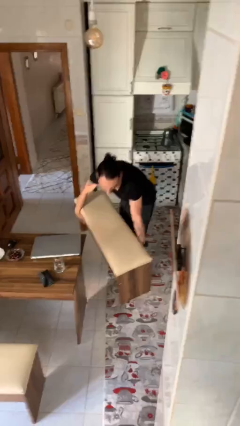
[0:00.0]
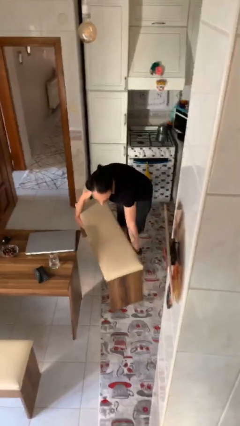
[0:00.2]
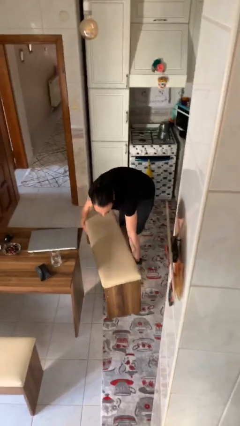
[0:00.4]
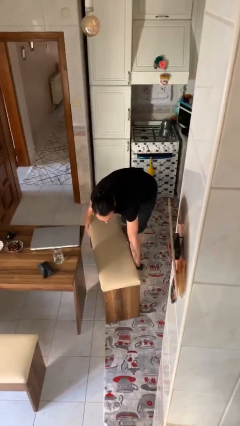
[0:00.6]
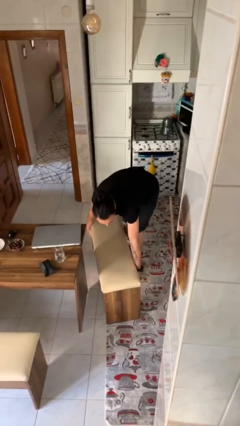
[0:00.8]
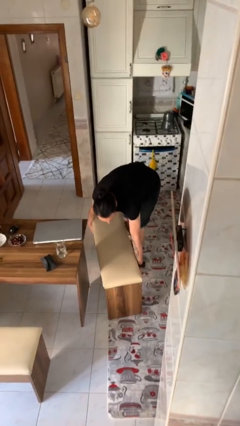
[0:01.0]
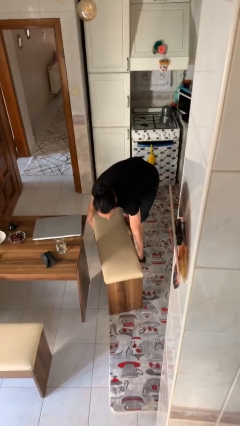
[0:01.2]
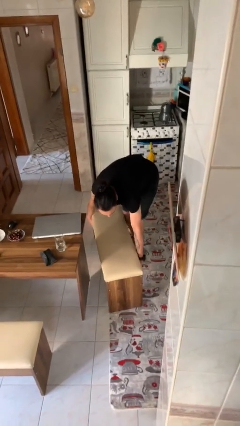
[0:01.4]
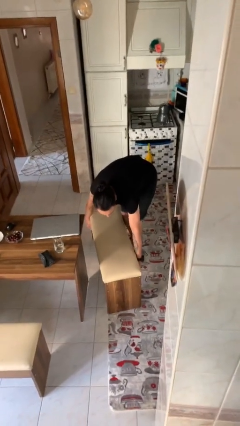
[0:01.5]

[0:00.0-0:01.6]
person puts down object on floor

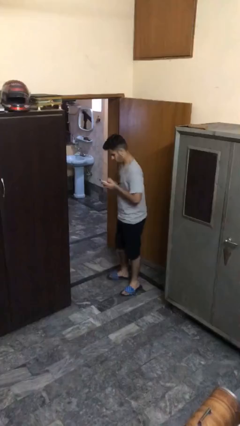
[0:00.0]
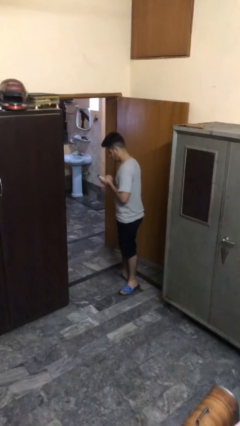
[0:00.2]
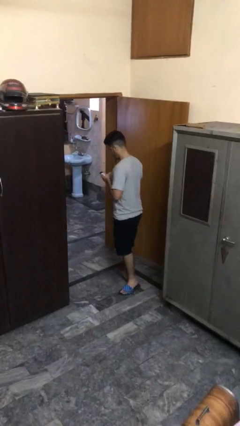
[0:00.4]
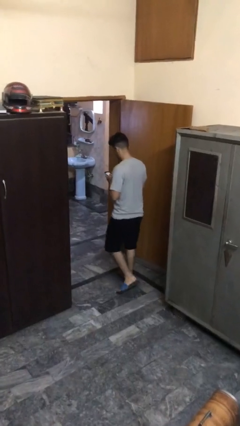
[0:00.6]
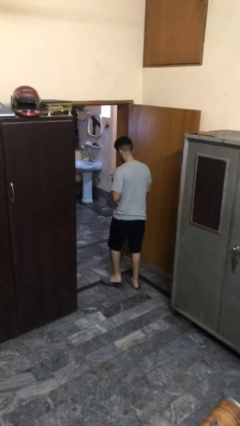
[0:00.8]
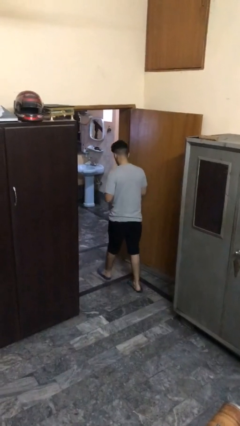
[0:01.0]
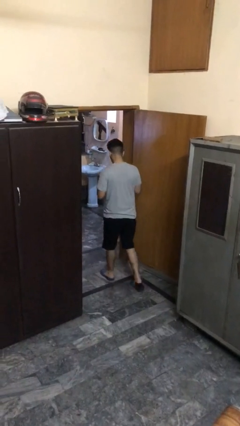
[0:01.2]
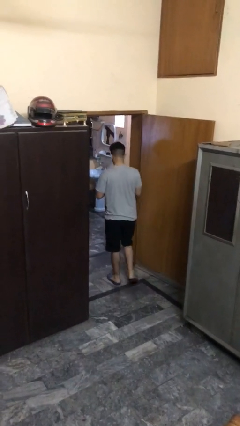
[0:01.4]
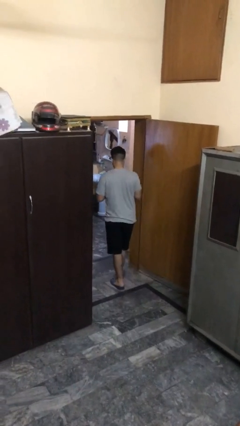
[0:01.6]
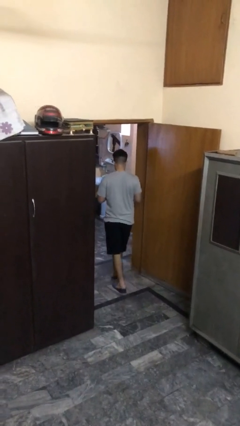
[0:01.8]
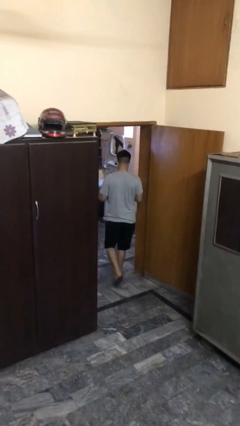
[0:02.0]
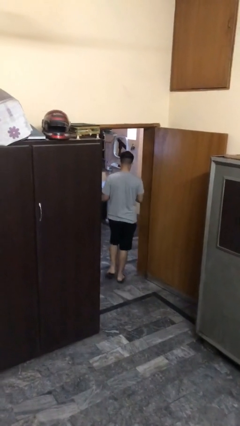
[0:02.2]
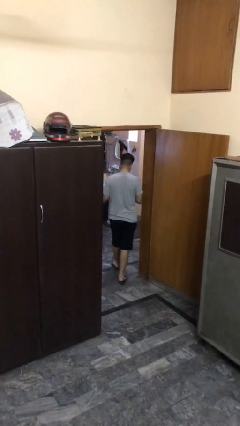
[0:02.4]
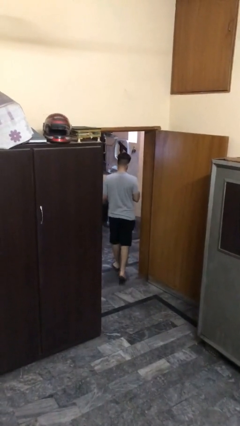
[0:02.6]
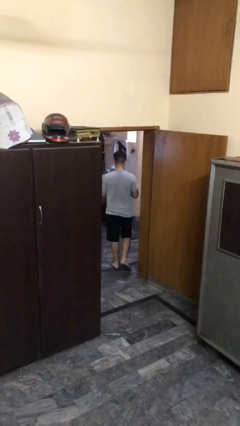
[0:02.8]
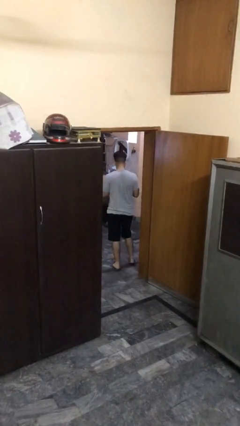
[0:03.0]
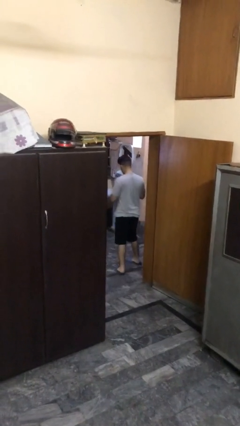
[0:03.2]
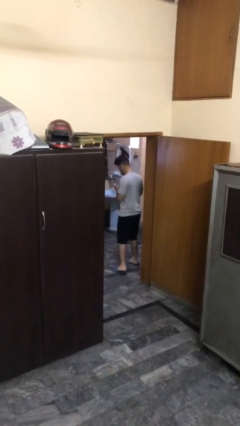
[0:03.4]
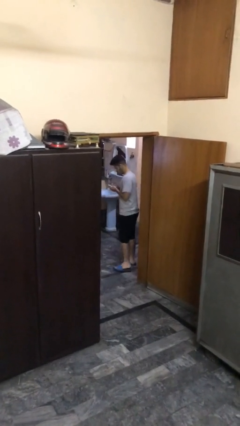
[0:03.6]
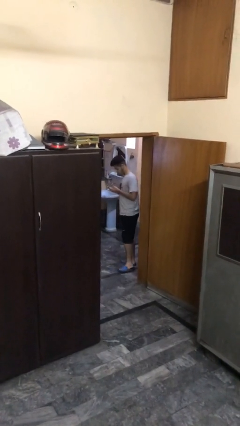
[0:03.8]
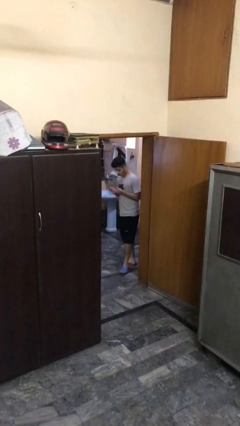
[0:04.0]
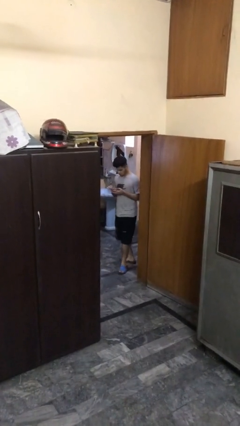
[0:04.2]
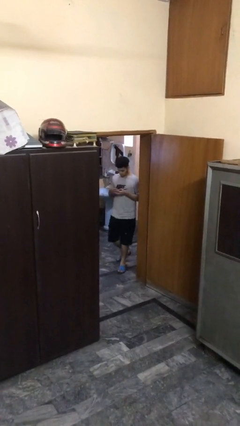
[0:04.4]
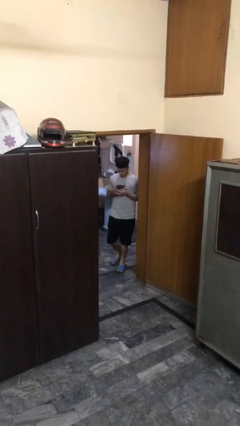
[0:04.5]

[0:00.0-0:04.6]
person exits scene through structure

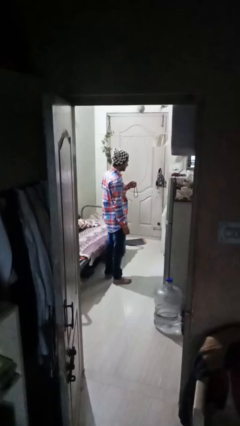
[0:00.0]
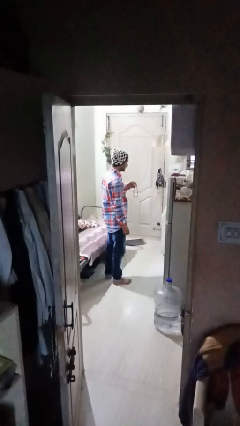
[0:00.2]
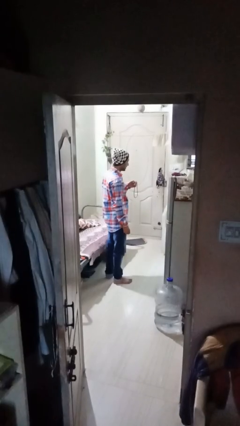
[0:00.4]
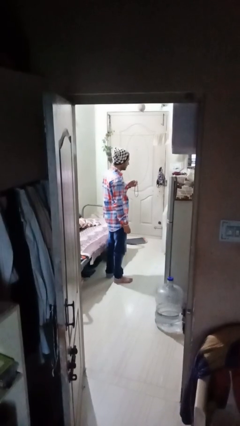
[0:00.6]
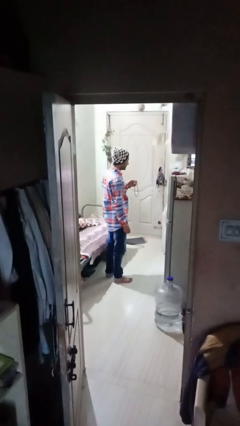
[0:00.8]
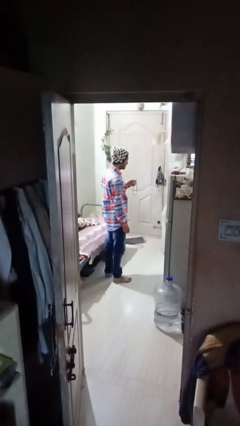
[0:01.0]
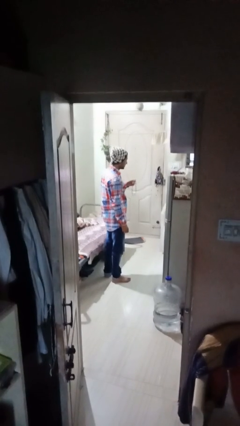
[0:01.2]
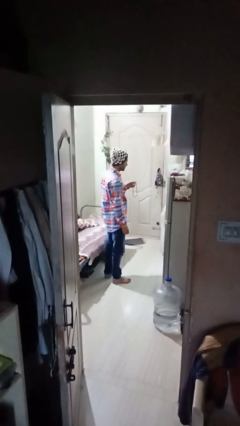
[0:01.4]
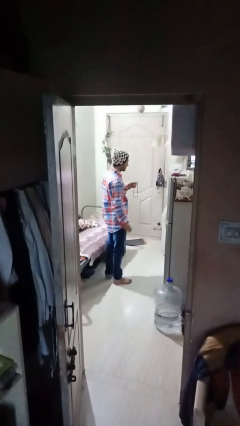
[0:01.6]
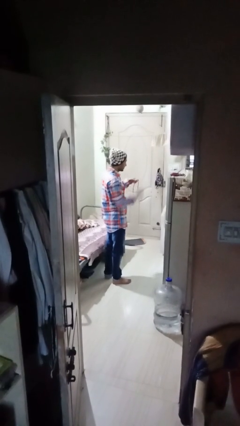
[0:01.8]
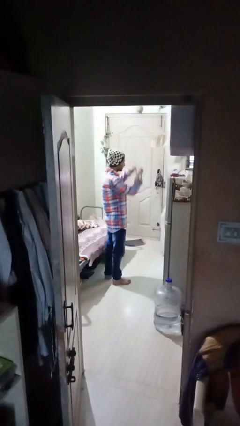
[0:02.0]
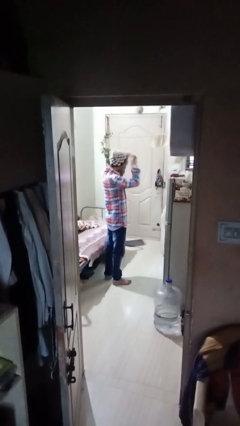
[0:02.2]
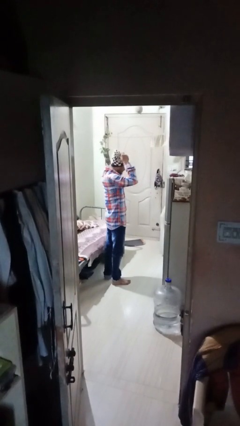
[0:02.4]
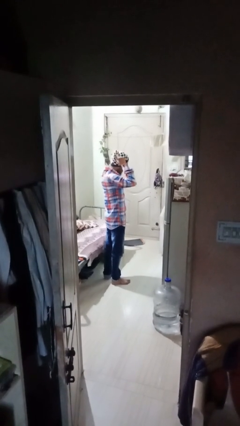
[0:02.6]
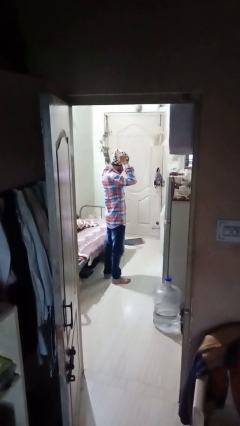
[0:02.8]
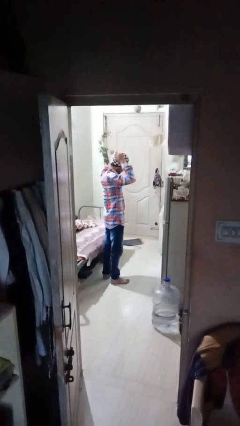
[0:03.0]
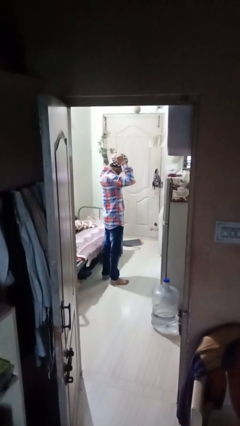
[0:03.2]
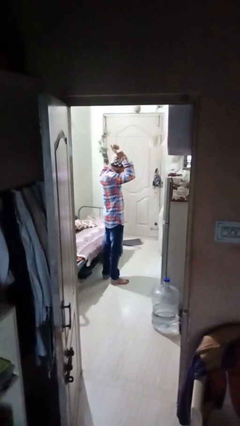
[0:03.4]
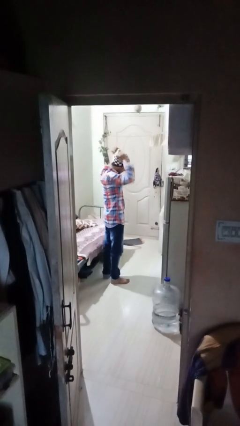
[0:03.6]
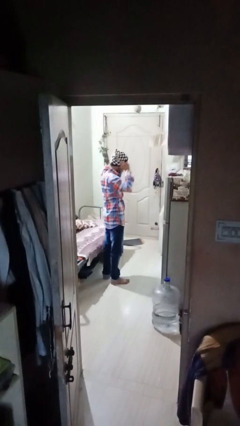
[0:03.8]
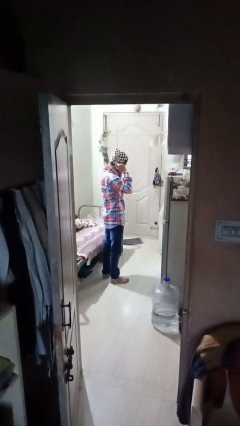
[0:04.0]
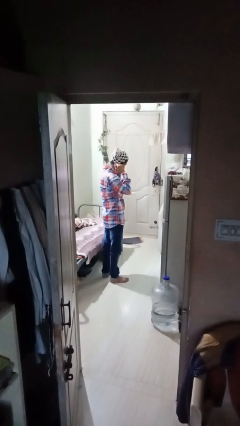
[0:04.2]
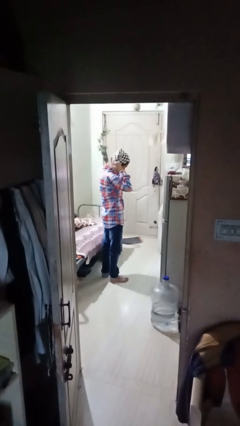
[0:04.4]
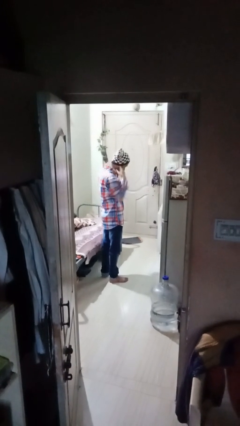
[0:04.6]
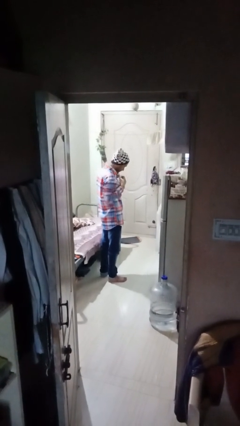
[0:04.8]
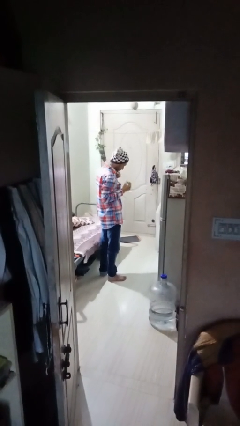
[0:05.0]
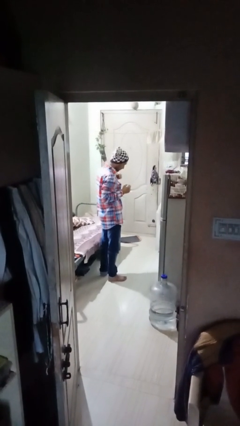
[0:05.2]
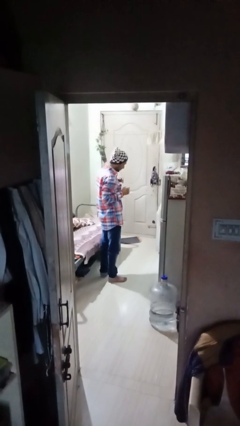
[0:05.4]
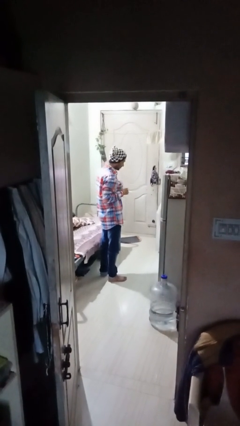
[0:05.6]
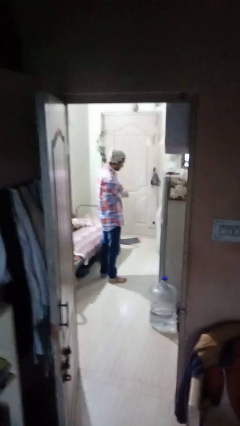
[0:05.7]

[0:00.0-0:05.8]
person puts on necklace

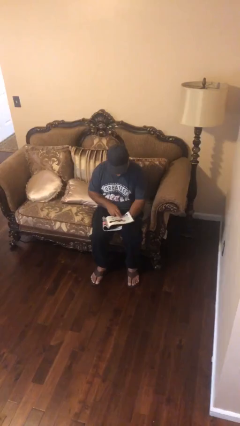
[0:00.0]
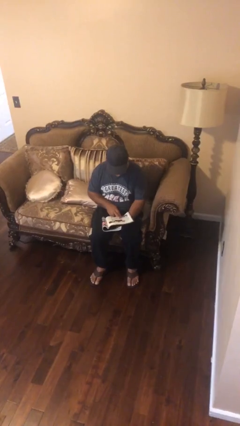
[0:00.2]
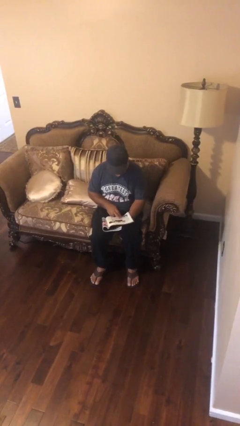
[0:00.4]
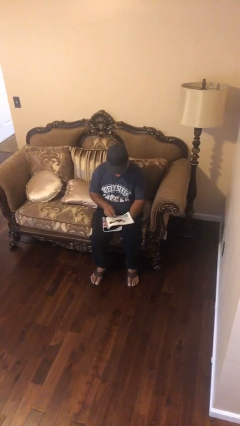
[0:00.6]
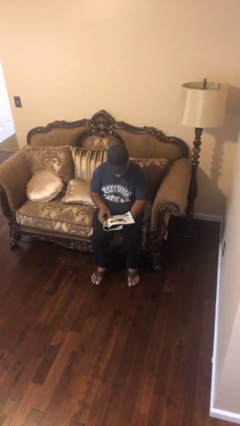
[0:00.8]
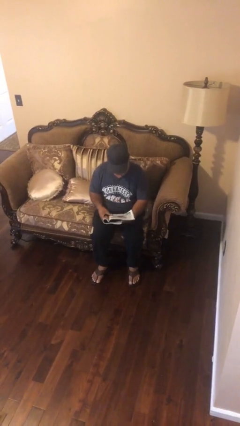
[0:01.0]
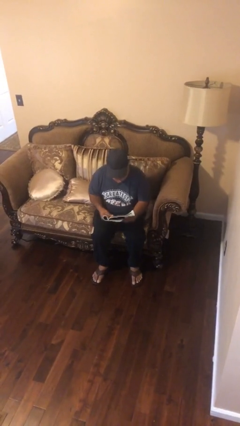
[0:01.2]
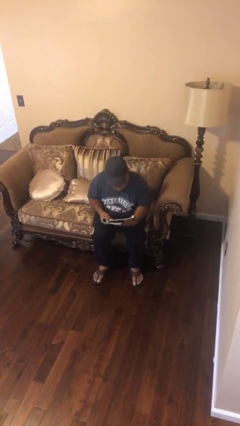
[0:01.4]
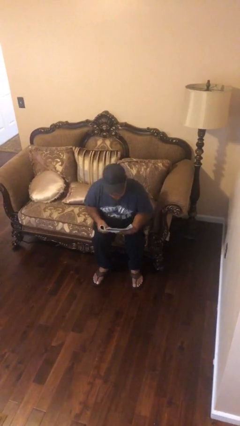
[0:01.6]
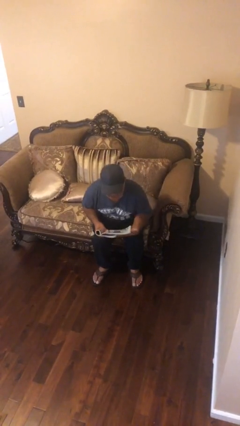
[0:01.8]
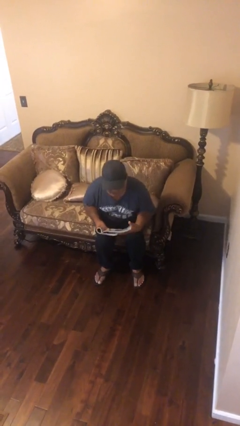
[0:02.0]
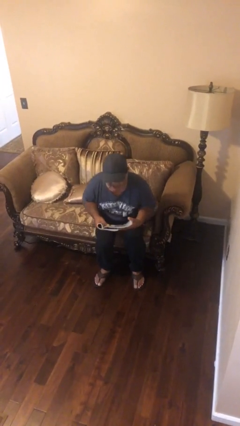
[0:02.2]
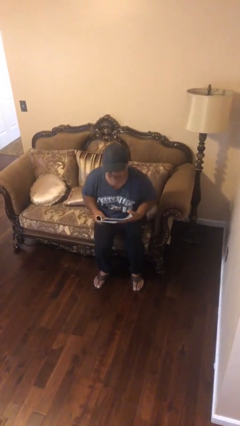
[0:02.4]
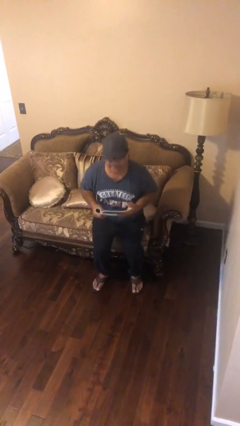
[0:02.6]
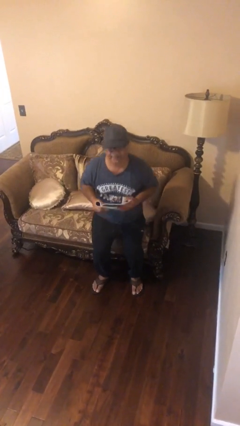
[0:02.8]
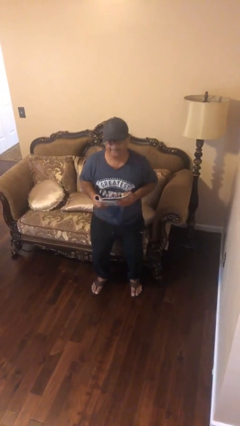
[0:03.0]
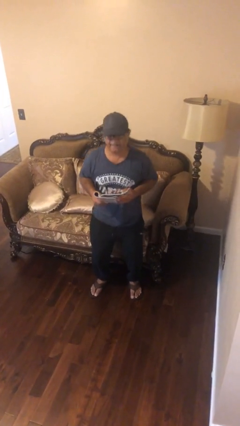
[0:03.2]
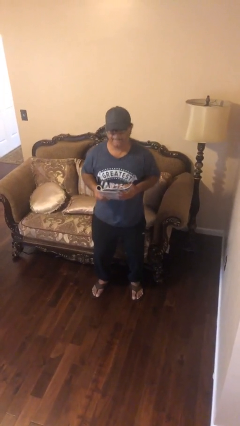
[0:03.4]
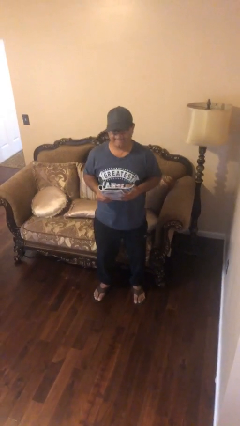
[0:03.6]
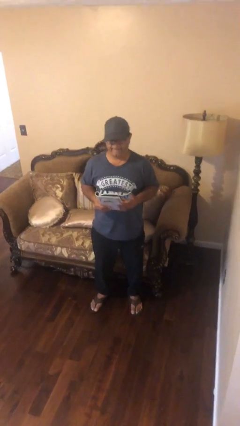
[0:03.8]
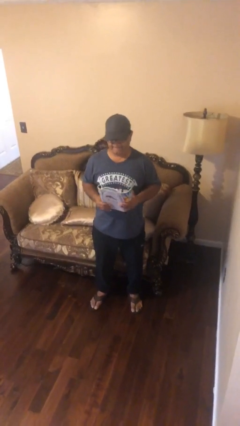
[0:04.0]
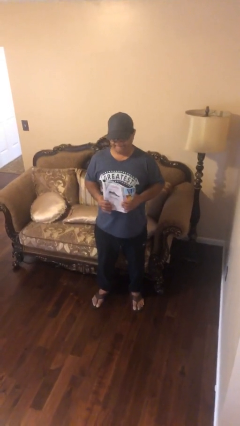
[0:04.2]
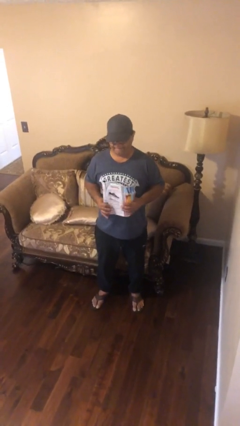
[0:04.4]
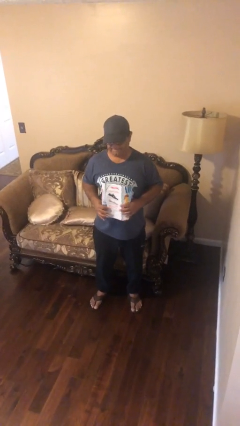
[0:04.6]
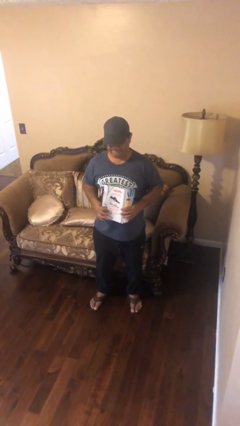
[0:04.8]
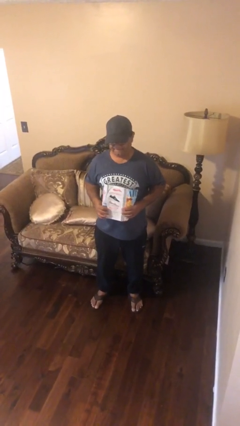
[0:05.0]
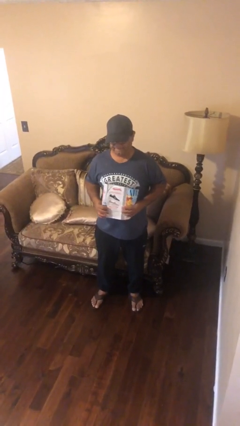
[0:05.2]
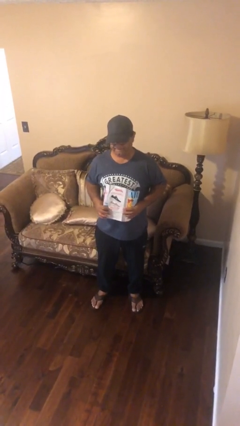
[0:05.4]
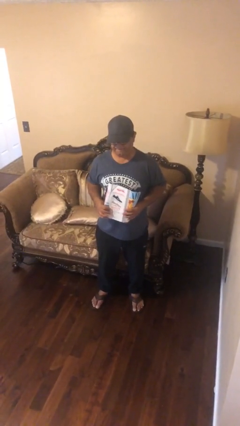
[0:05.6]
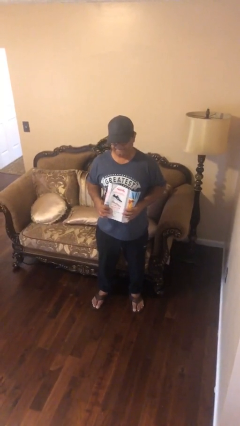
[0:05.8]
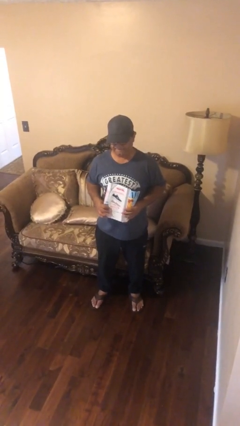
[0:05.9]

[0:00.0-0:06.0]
person stands up
